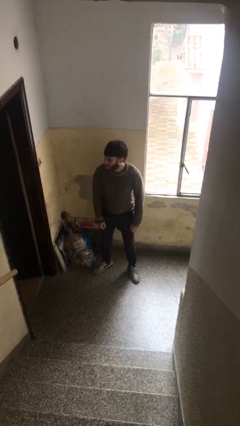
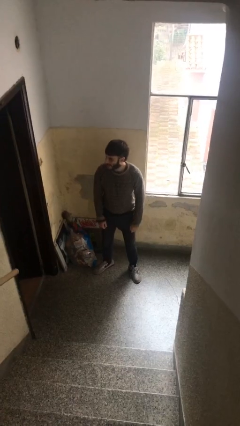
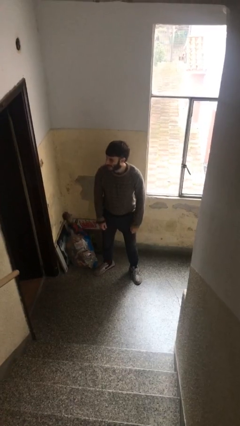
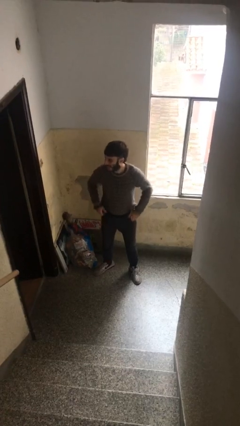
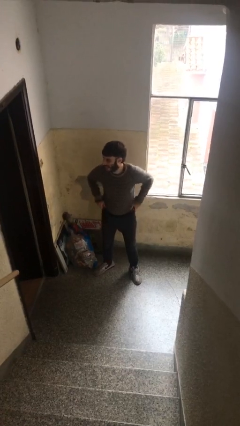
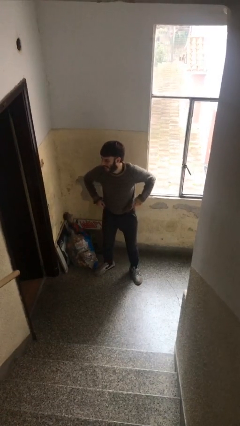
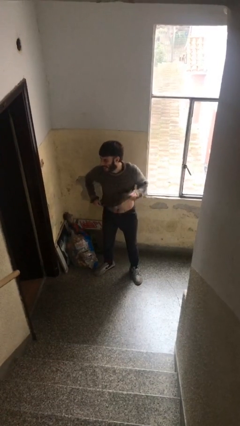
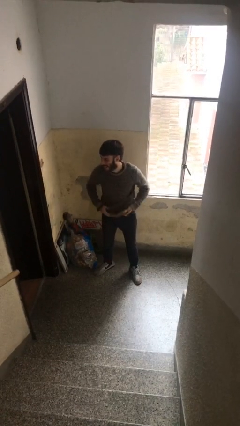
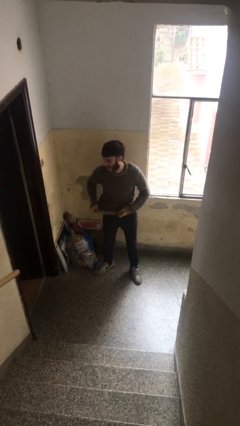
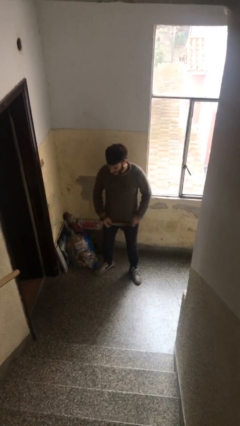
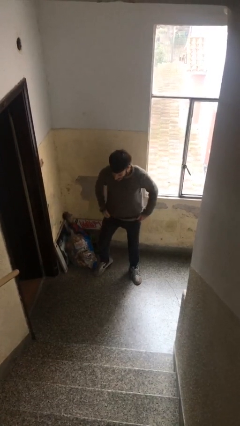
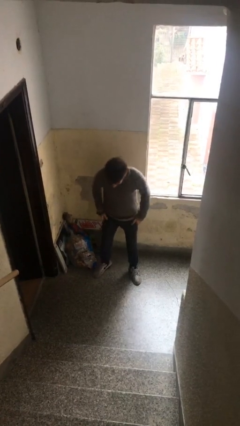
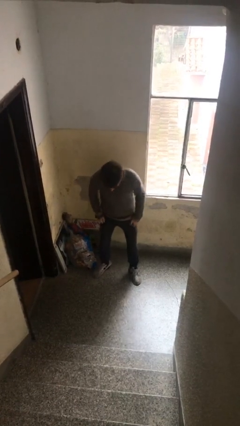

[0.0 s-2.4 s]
person untucks shirt

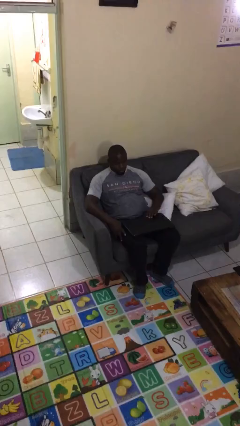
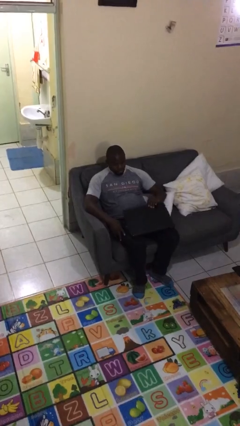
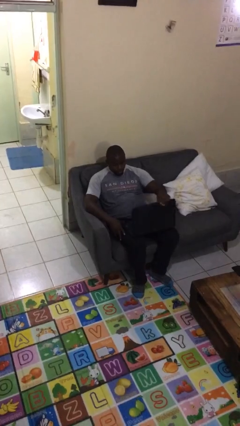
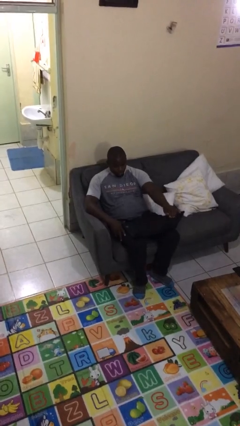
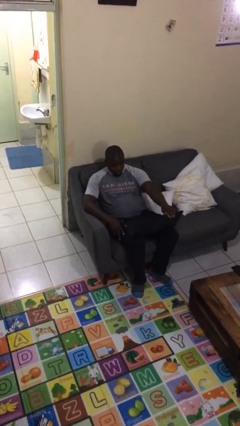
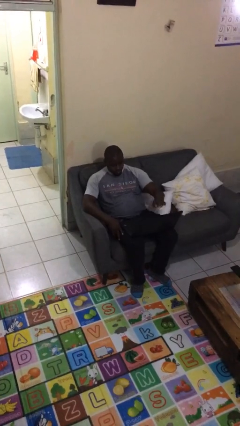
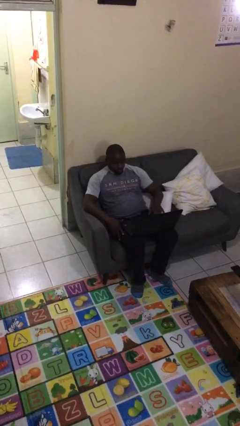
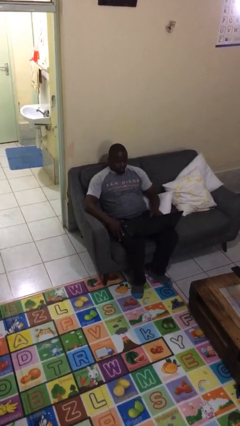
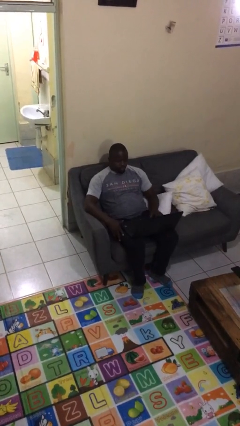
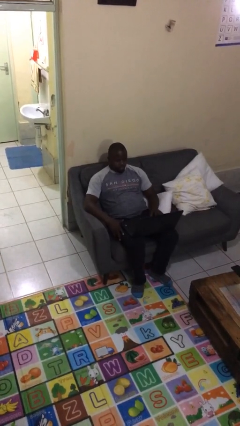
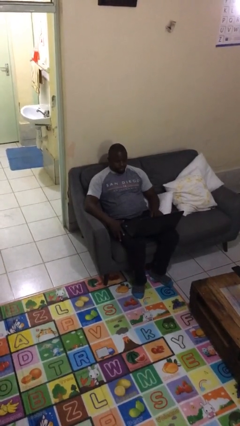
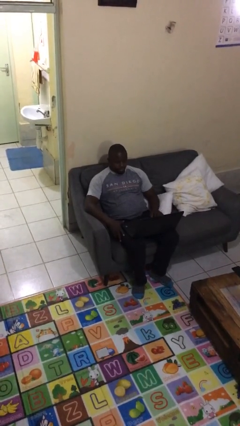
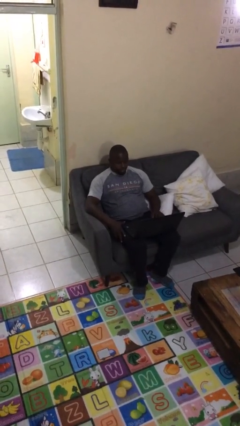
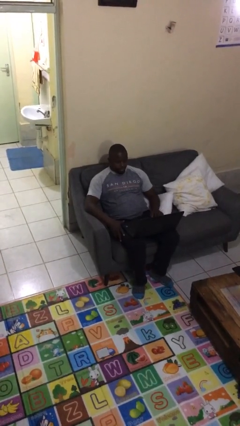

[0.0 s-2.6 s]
person opens laptop

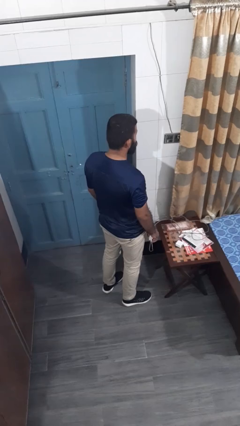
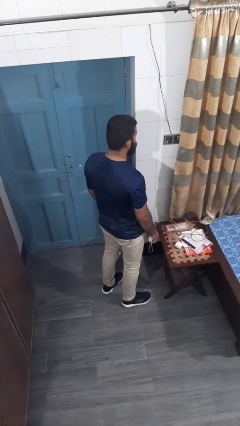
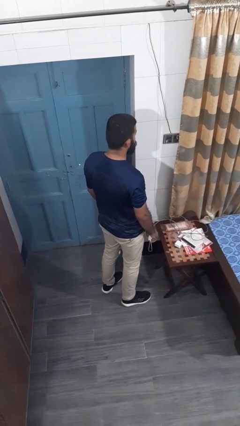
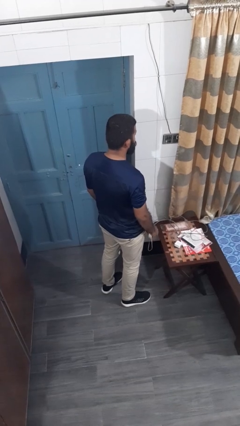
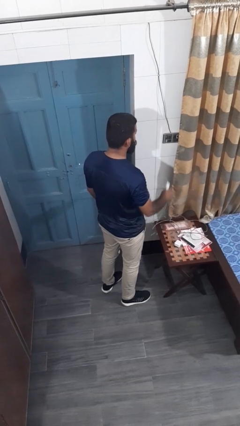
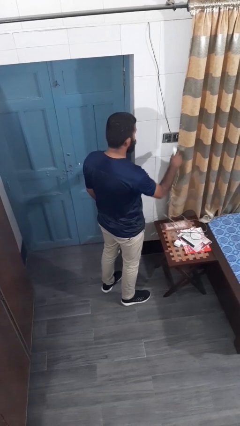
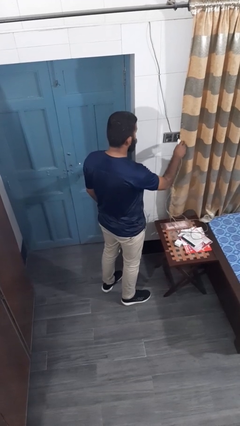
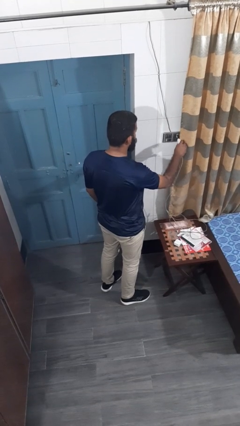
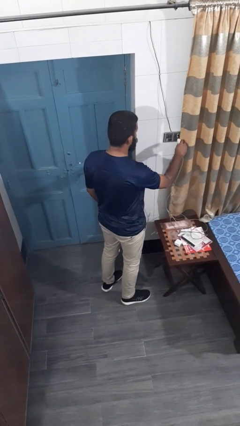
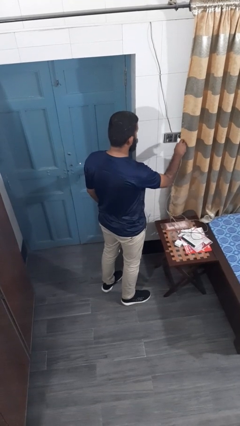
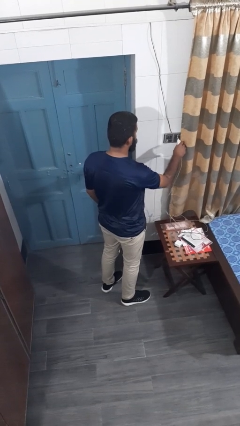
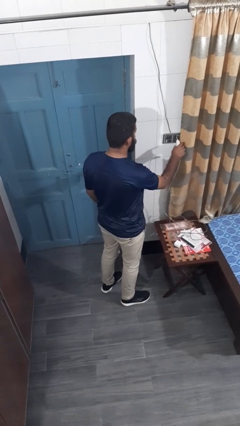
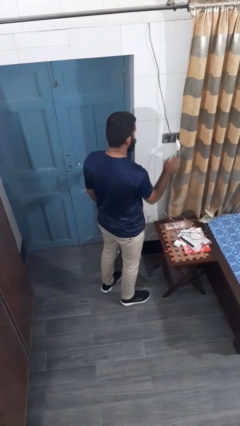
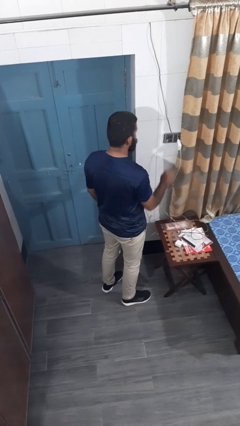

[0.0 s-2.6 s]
person plugs into electrical socket

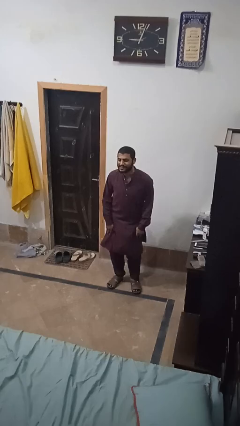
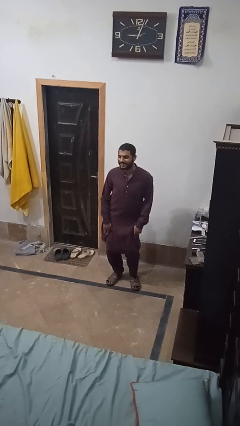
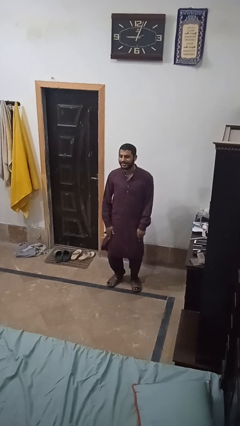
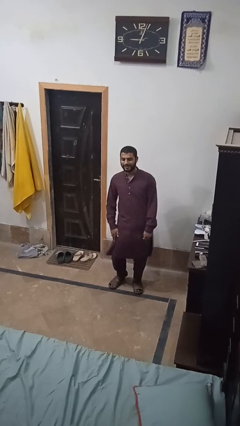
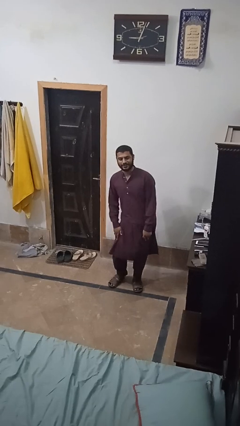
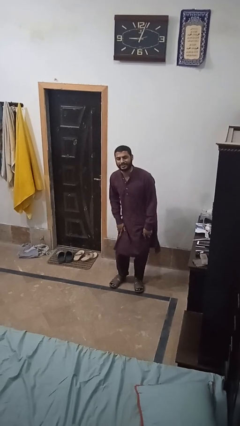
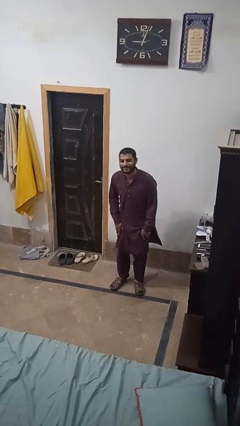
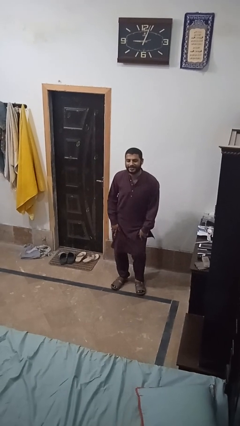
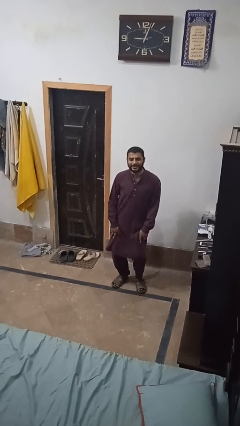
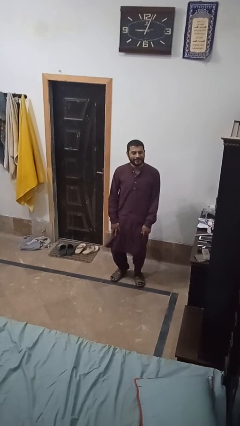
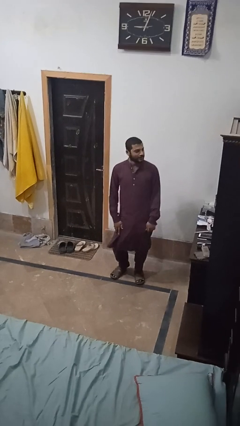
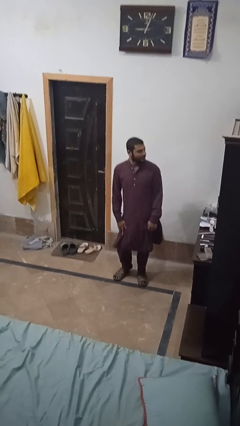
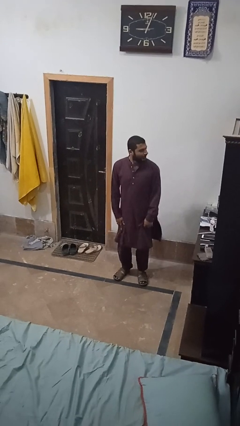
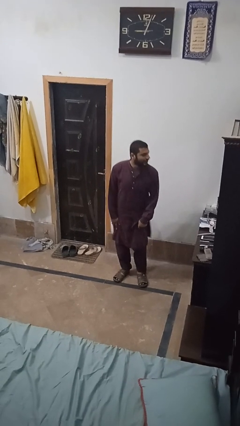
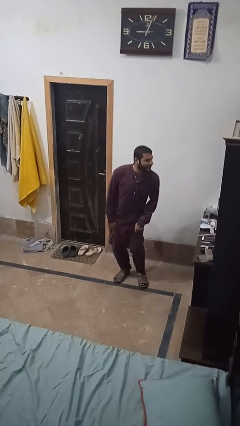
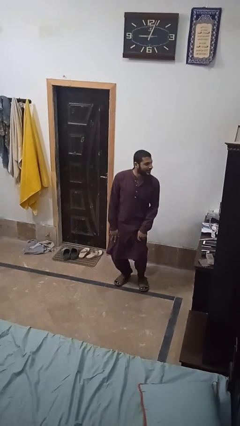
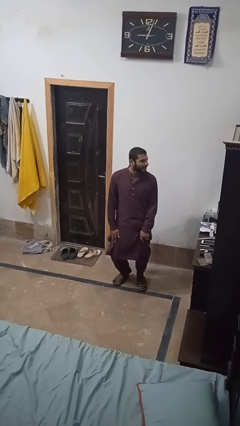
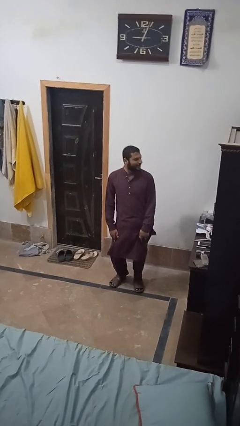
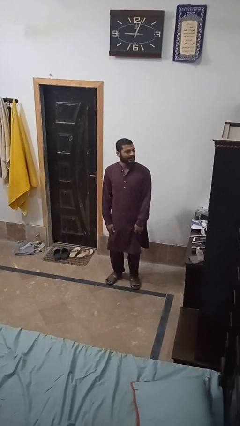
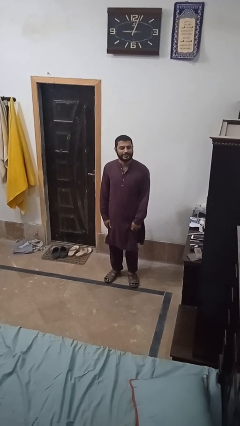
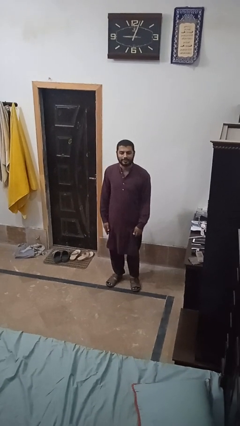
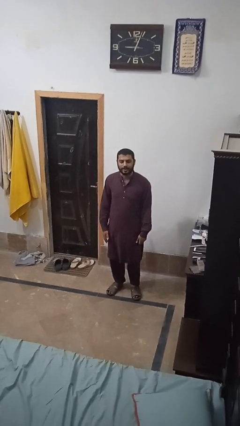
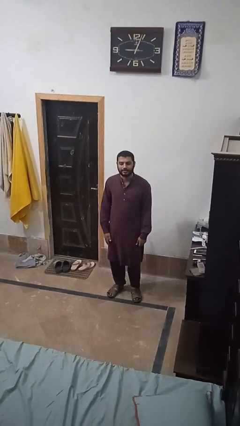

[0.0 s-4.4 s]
person wiggles hips

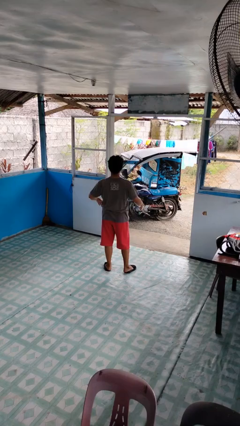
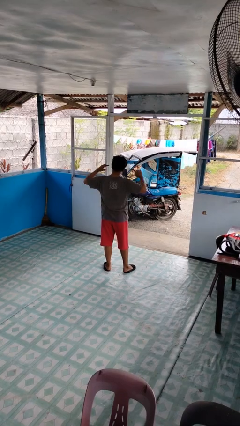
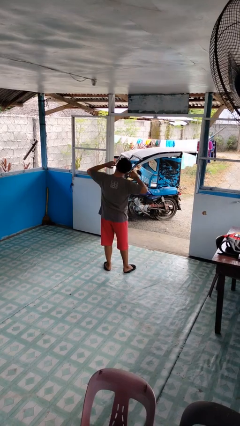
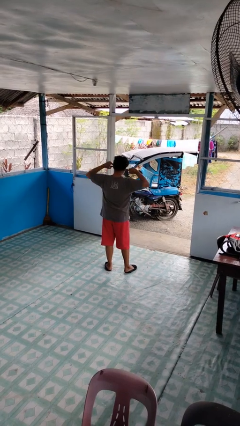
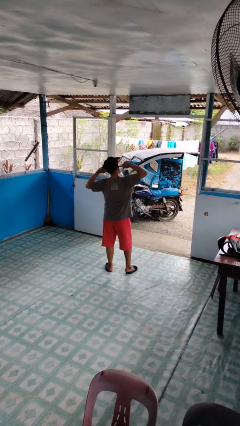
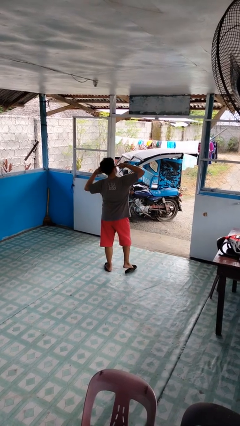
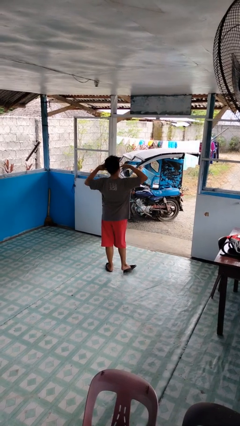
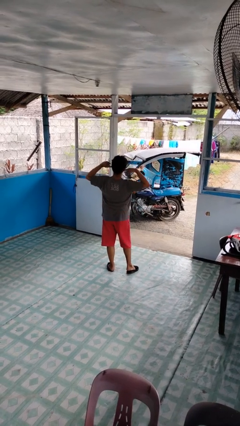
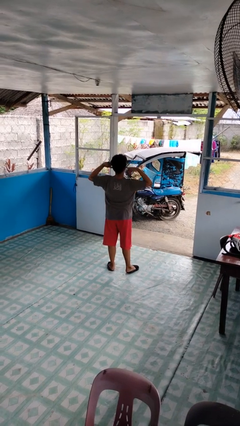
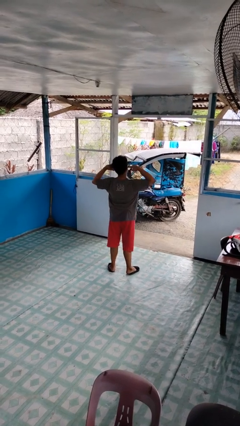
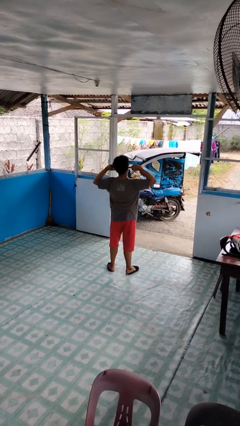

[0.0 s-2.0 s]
person puts fingers in ear

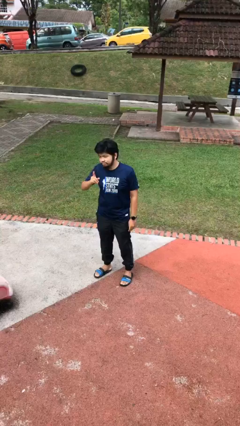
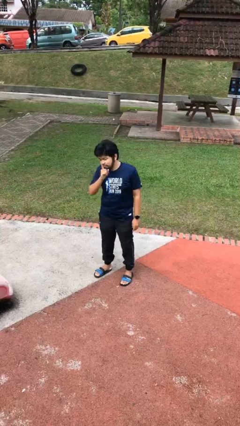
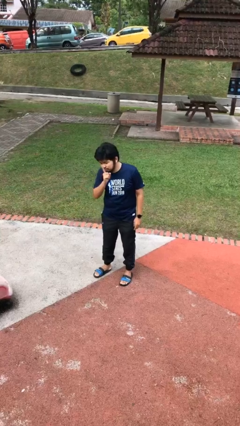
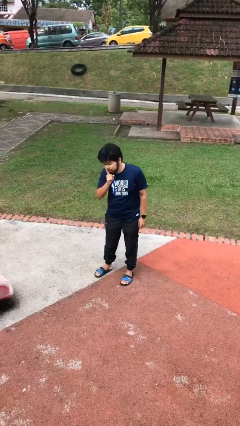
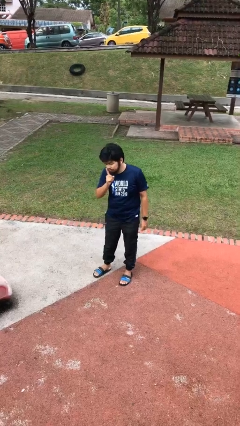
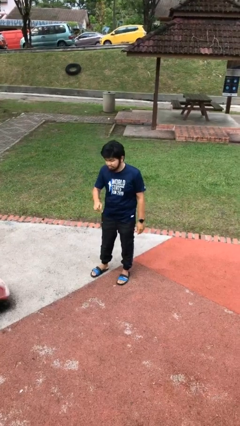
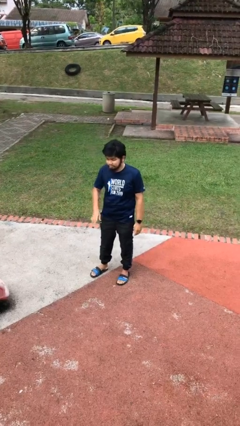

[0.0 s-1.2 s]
person gestures be quiet

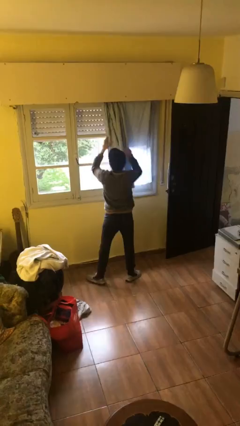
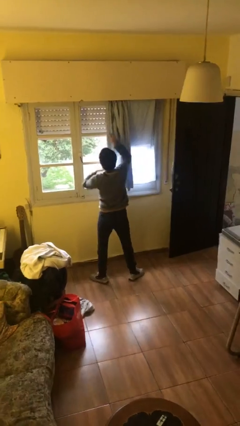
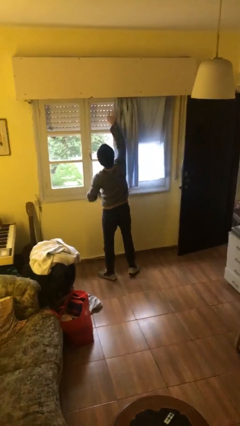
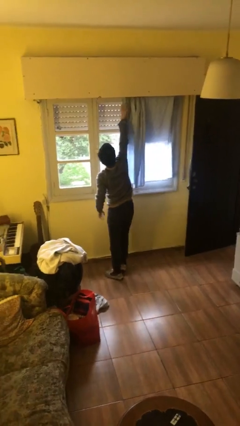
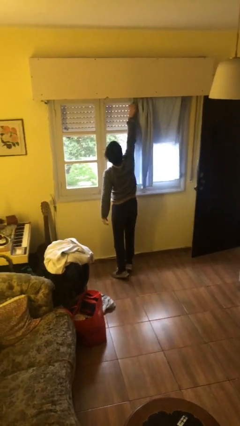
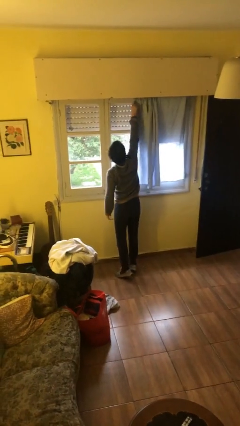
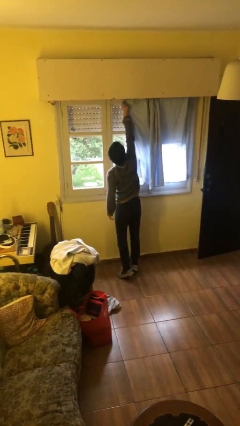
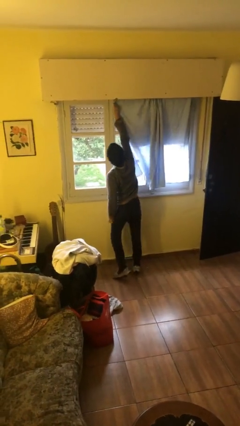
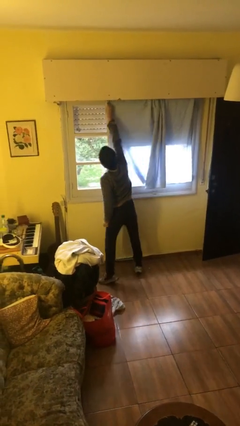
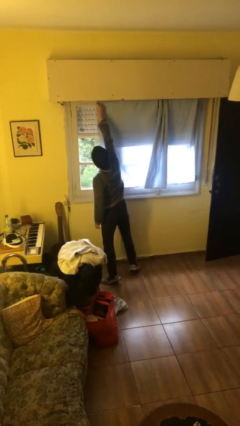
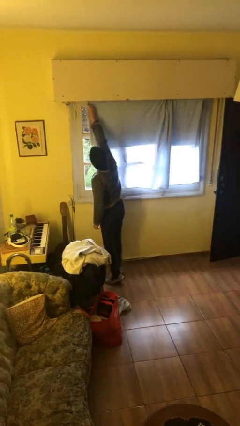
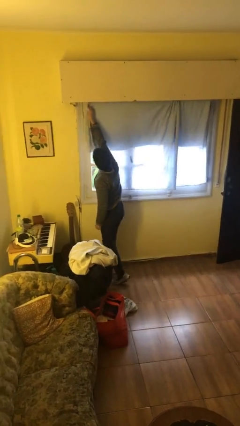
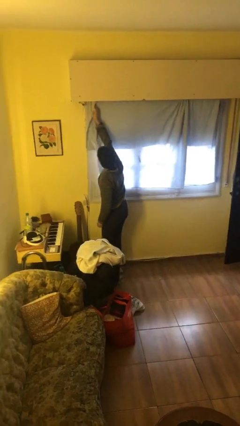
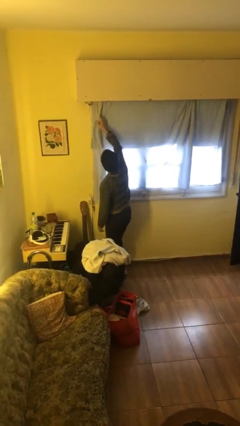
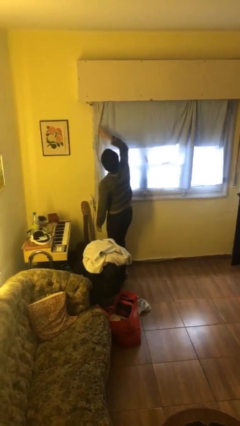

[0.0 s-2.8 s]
person closes curtains
